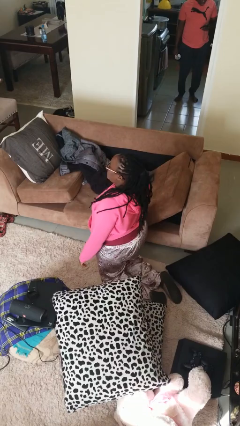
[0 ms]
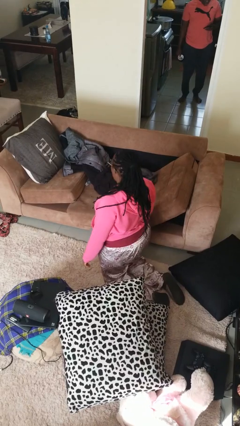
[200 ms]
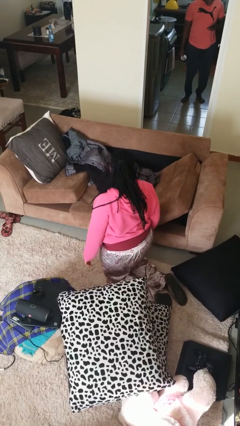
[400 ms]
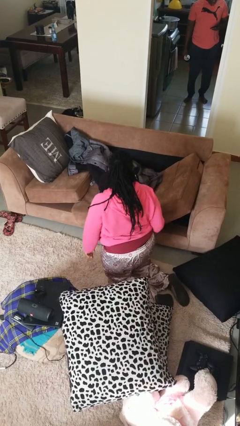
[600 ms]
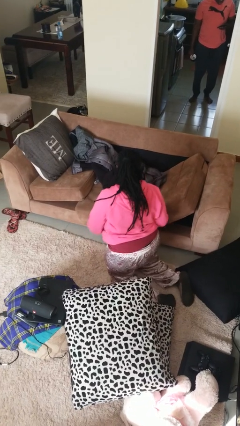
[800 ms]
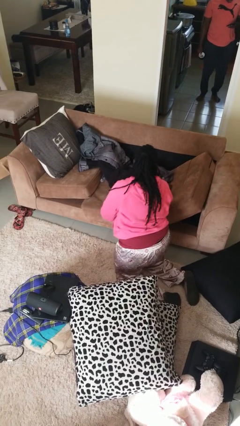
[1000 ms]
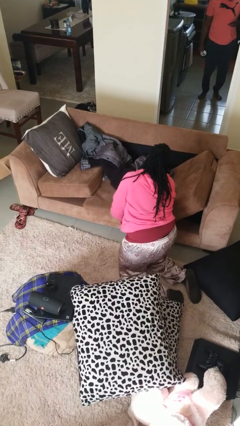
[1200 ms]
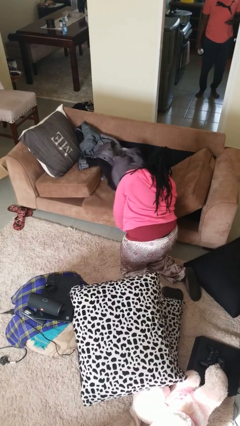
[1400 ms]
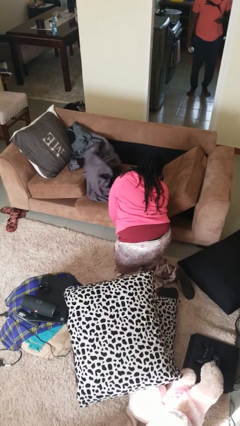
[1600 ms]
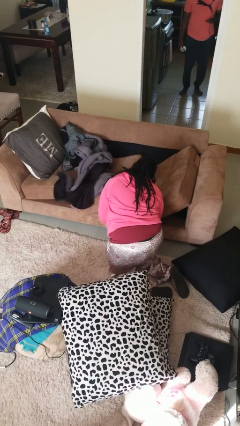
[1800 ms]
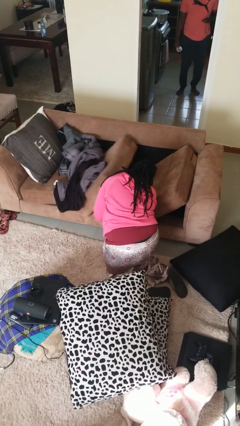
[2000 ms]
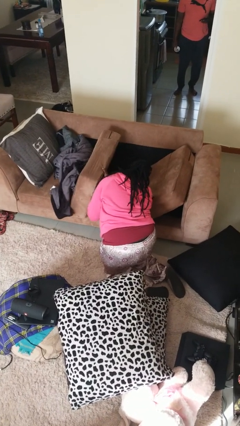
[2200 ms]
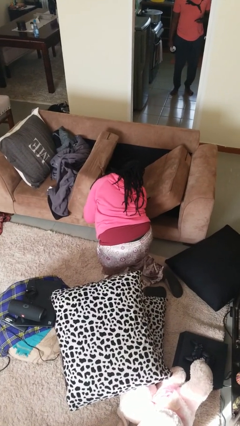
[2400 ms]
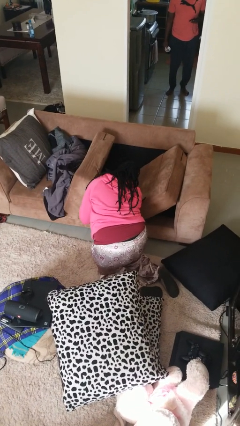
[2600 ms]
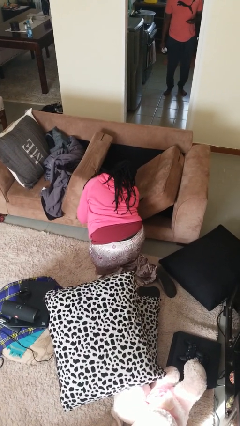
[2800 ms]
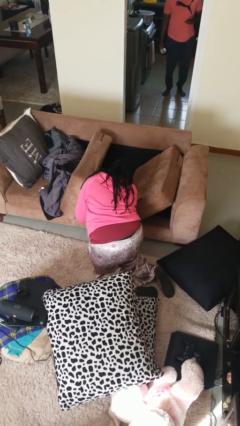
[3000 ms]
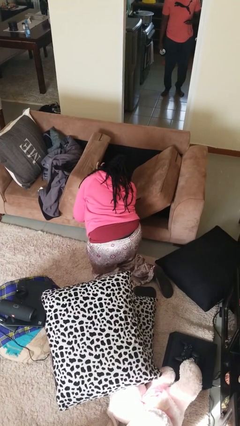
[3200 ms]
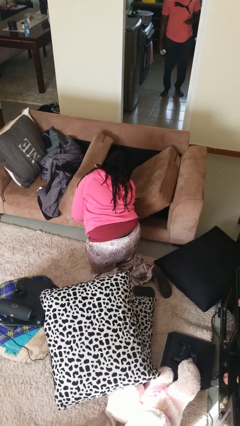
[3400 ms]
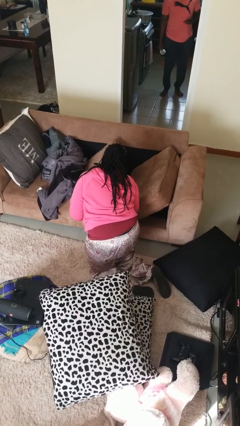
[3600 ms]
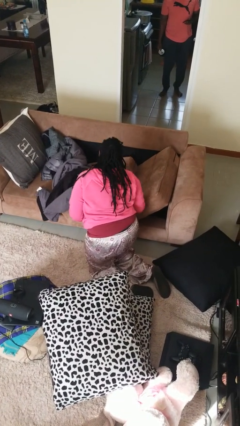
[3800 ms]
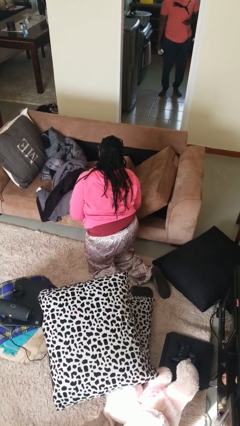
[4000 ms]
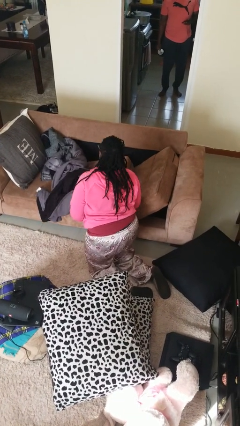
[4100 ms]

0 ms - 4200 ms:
person searches under couch

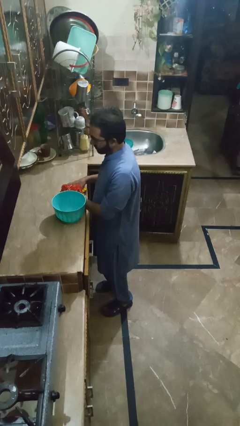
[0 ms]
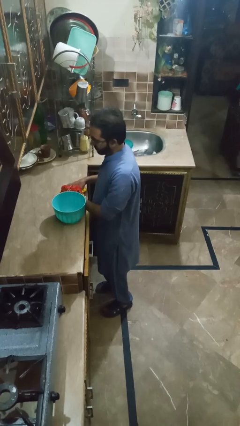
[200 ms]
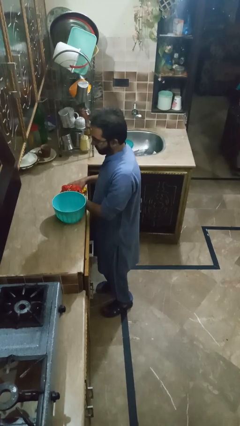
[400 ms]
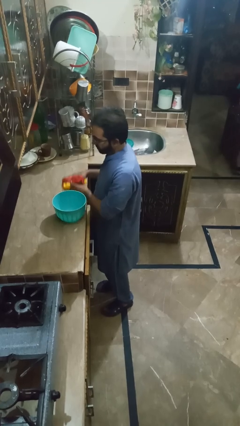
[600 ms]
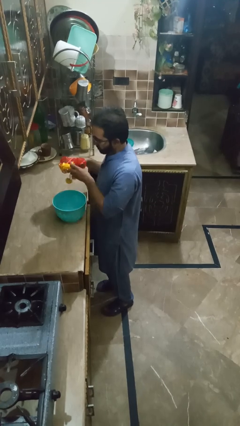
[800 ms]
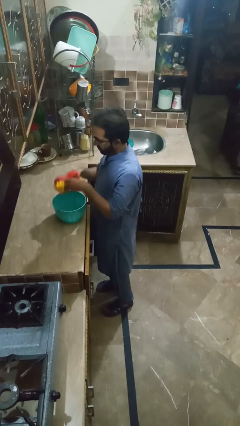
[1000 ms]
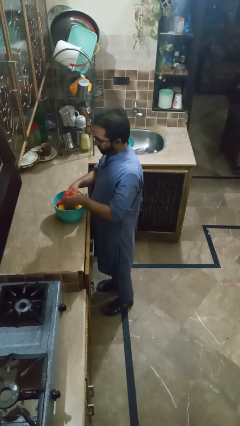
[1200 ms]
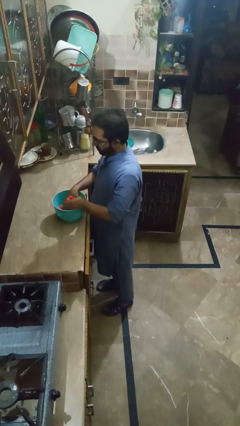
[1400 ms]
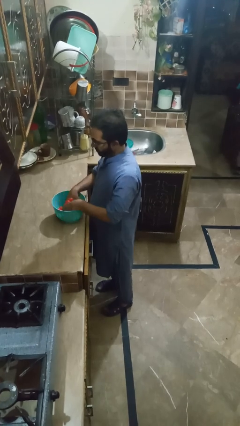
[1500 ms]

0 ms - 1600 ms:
person pours into bowl

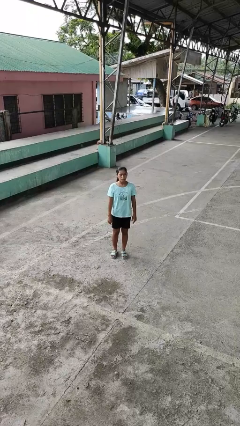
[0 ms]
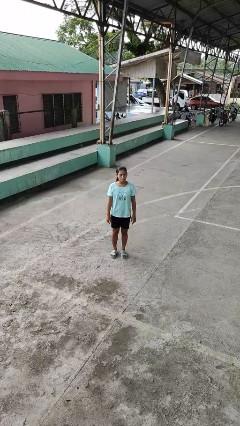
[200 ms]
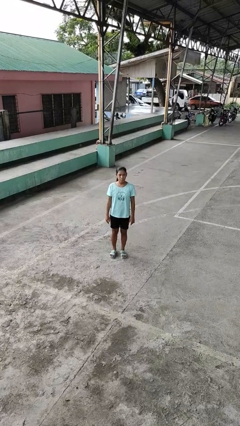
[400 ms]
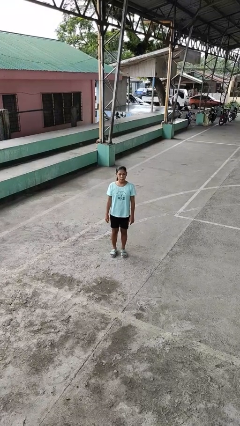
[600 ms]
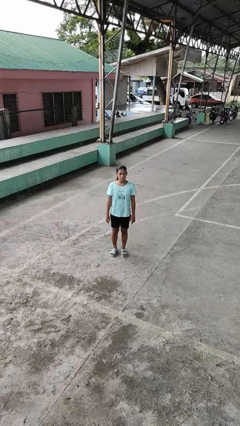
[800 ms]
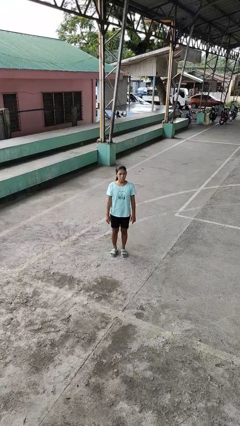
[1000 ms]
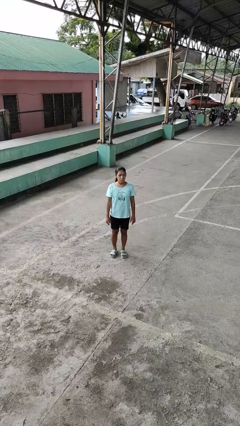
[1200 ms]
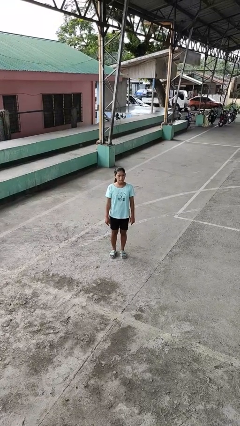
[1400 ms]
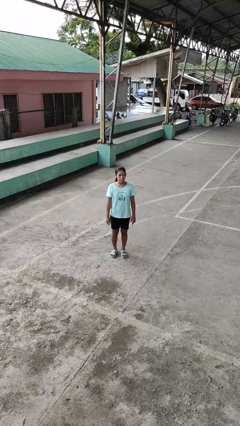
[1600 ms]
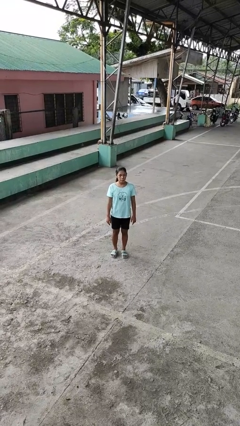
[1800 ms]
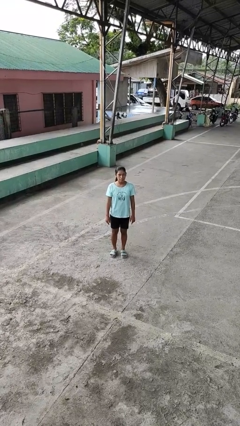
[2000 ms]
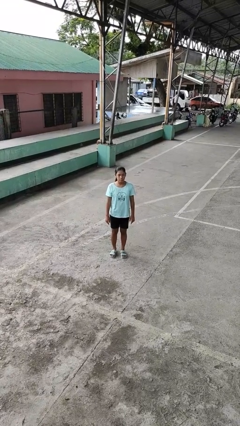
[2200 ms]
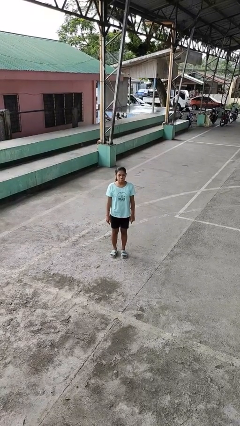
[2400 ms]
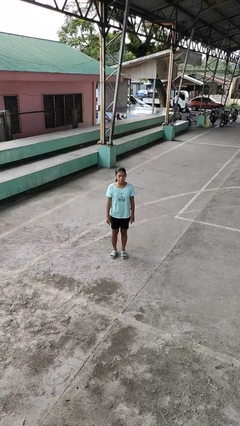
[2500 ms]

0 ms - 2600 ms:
person sticks out tongue

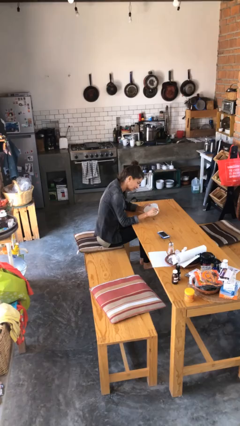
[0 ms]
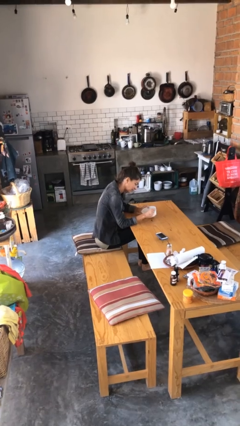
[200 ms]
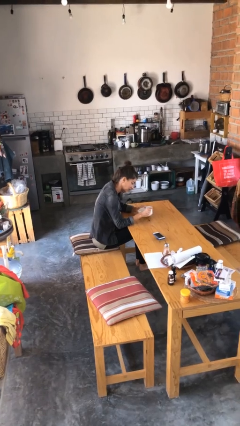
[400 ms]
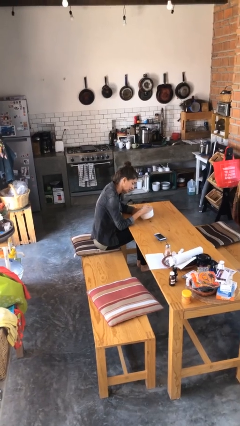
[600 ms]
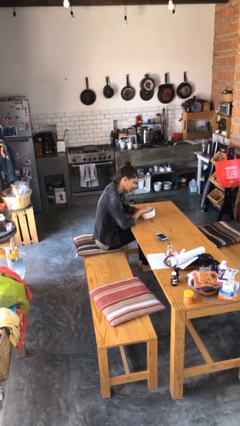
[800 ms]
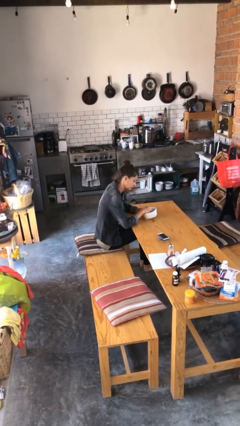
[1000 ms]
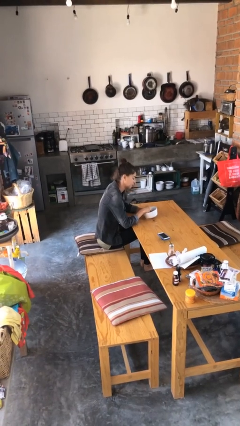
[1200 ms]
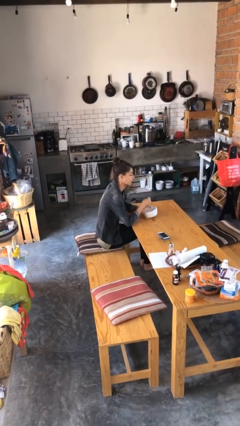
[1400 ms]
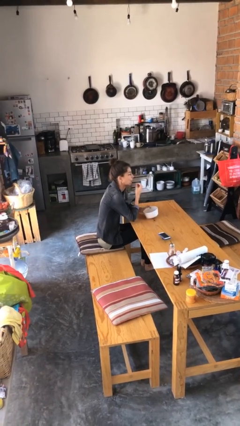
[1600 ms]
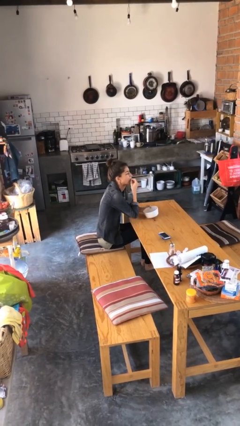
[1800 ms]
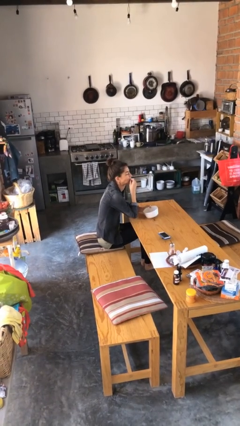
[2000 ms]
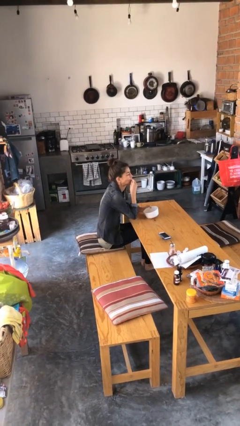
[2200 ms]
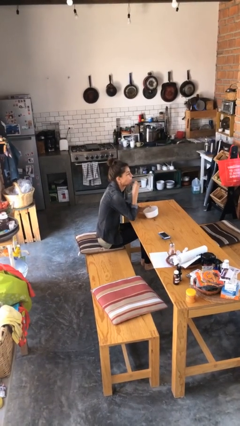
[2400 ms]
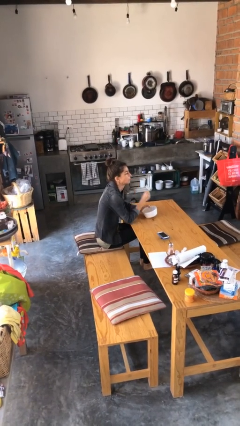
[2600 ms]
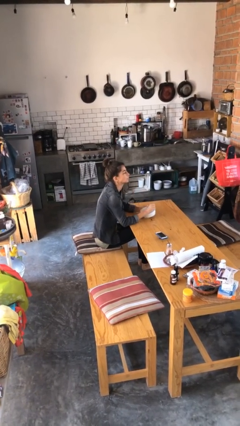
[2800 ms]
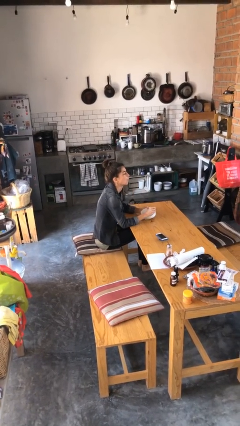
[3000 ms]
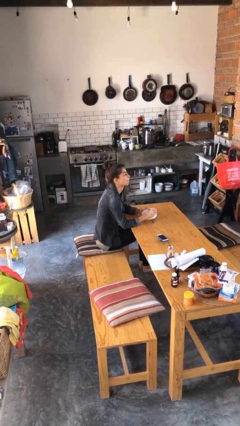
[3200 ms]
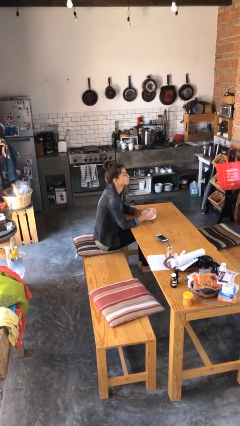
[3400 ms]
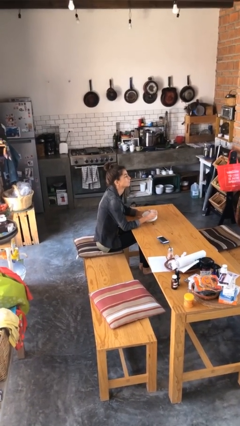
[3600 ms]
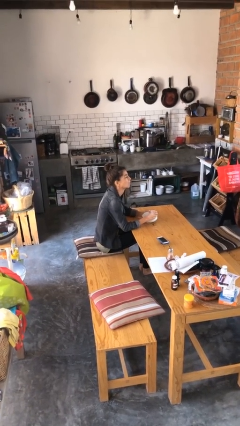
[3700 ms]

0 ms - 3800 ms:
person eats with hands

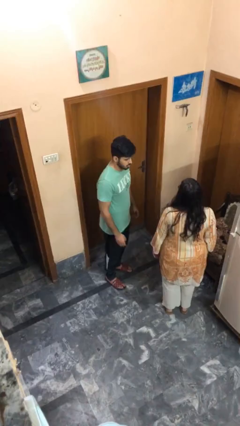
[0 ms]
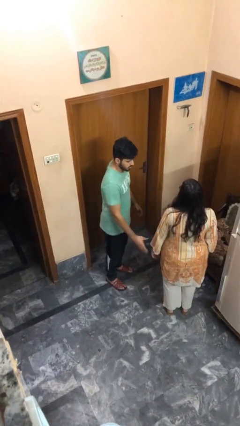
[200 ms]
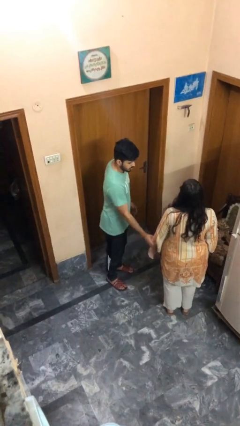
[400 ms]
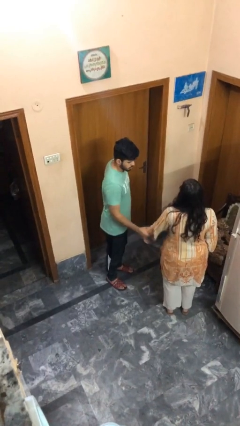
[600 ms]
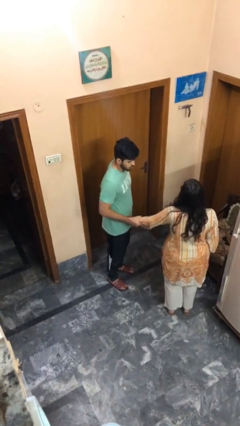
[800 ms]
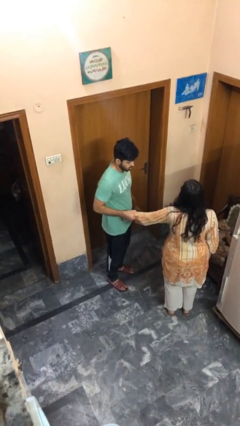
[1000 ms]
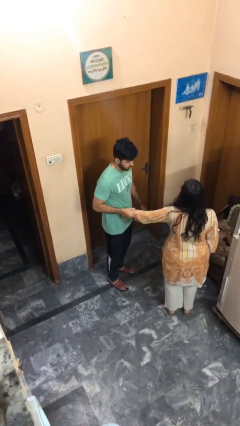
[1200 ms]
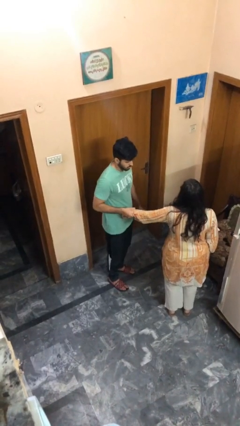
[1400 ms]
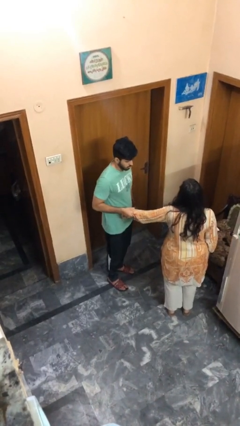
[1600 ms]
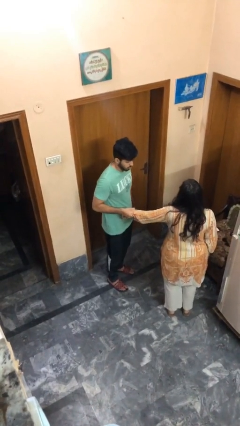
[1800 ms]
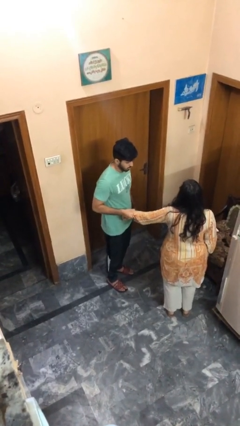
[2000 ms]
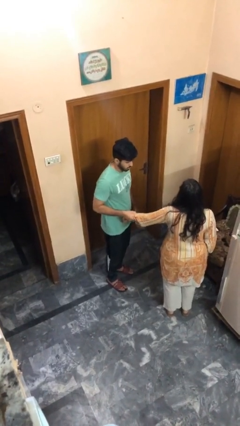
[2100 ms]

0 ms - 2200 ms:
person grabs person by forearm

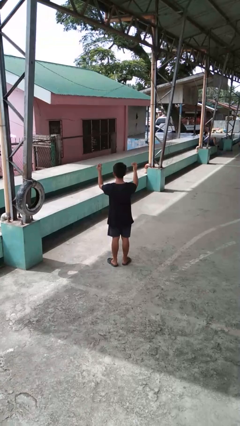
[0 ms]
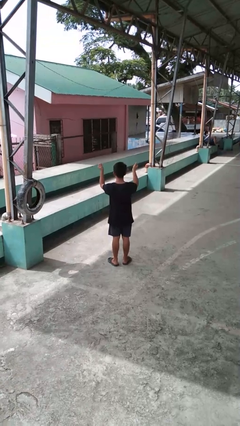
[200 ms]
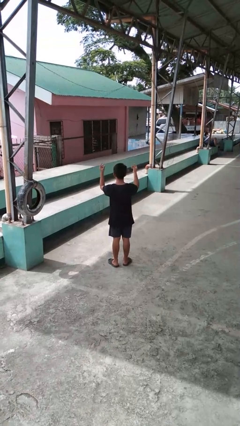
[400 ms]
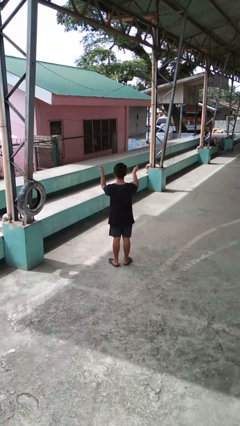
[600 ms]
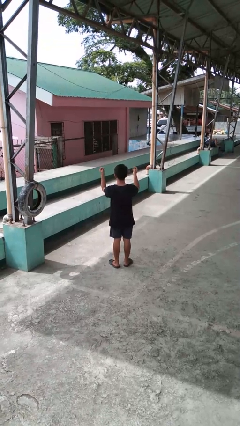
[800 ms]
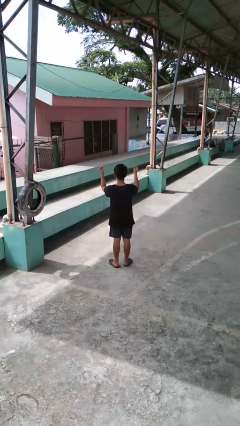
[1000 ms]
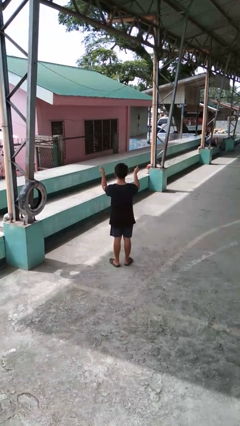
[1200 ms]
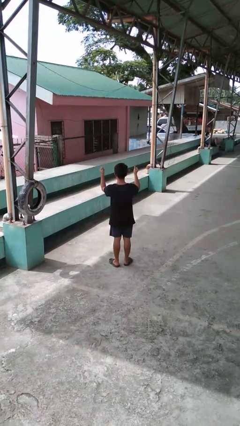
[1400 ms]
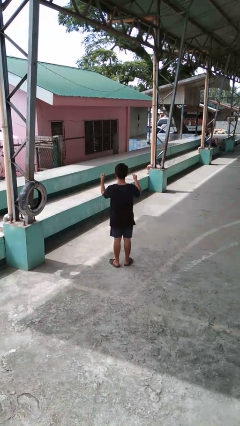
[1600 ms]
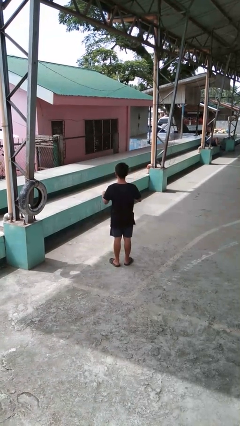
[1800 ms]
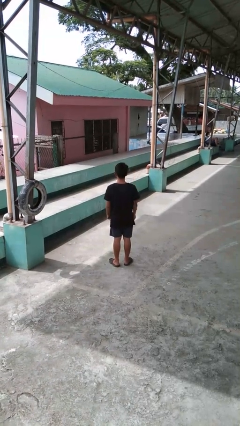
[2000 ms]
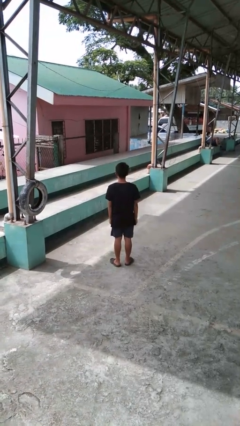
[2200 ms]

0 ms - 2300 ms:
person snaps fingers

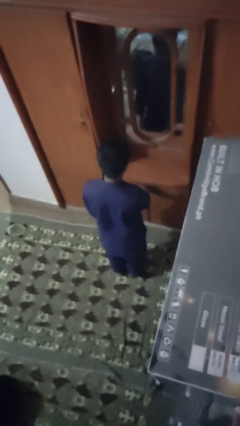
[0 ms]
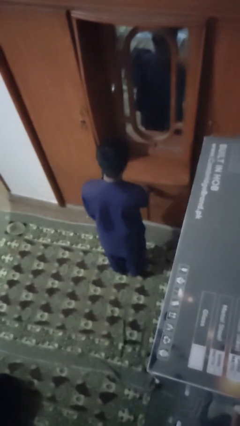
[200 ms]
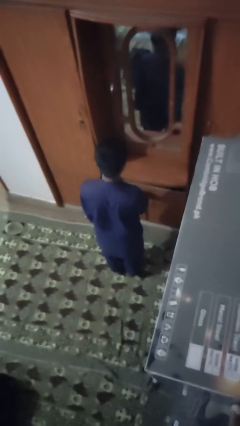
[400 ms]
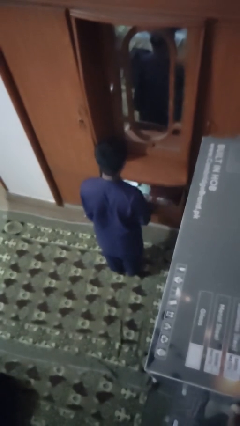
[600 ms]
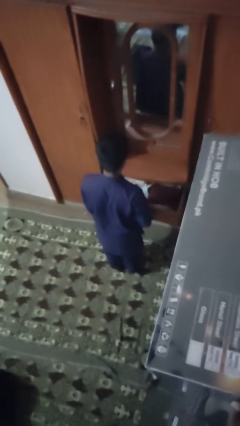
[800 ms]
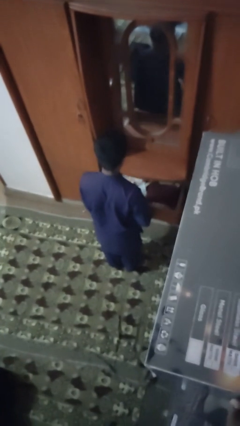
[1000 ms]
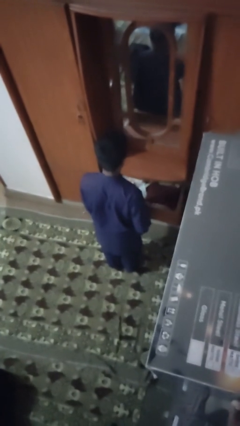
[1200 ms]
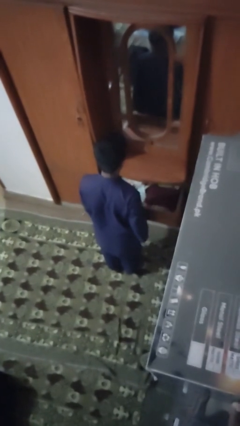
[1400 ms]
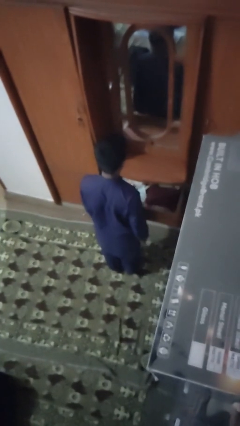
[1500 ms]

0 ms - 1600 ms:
person opens dresser drawer
